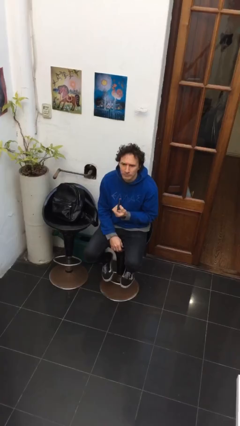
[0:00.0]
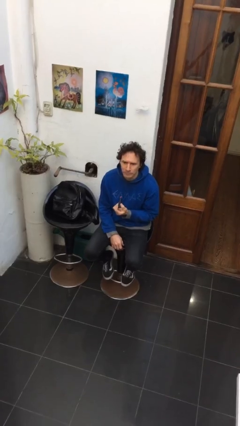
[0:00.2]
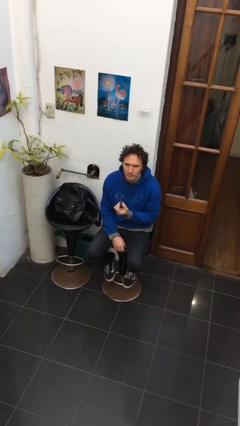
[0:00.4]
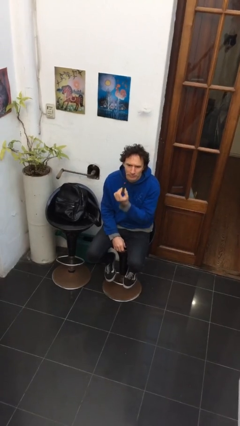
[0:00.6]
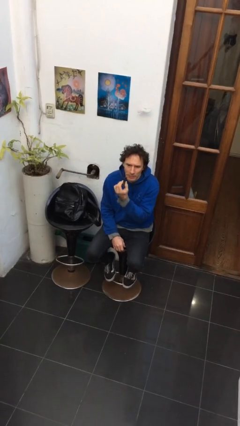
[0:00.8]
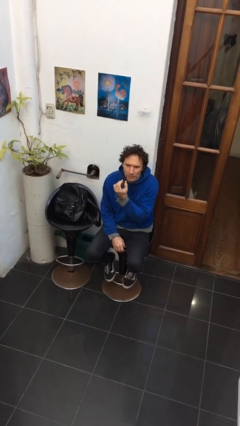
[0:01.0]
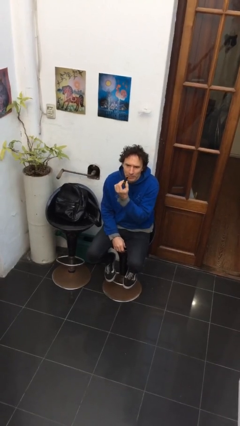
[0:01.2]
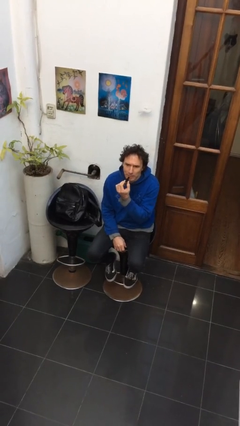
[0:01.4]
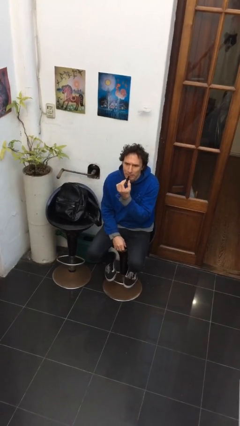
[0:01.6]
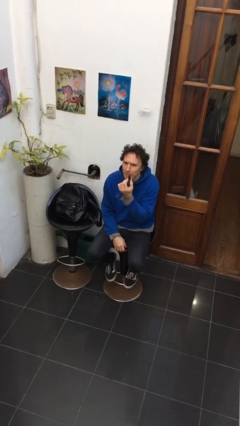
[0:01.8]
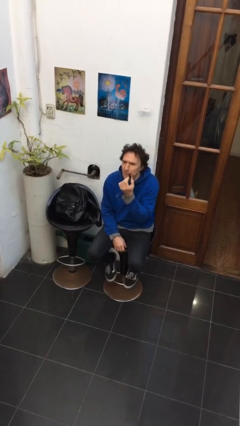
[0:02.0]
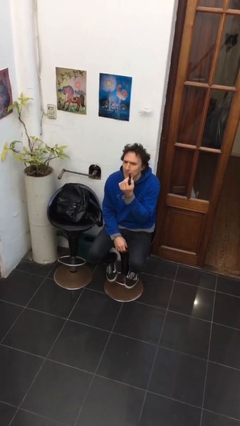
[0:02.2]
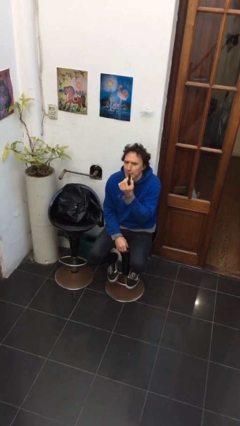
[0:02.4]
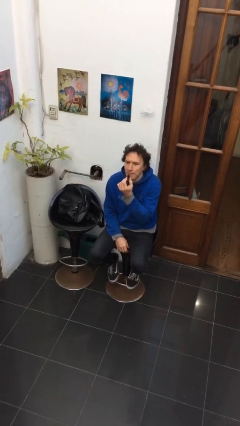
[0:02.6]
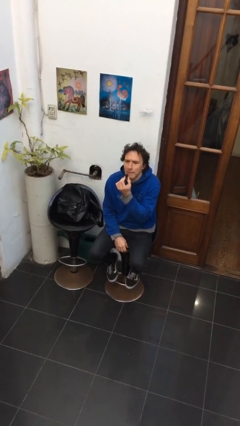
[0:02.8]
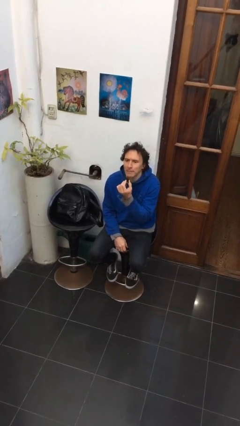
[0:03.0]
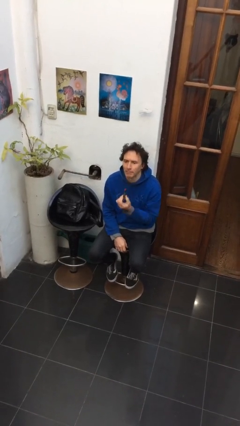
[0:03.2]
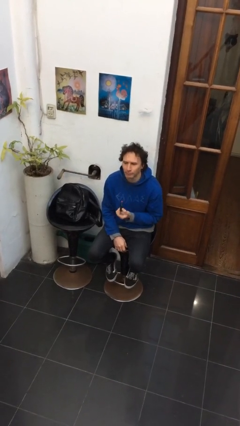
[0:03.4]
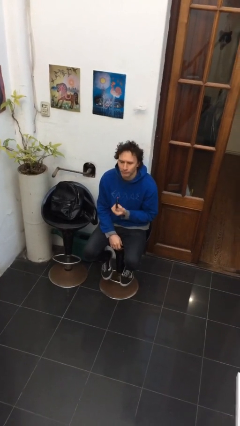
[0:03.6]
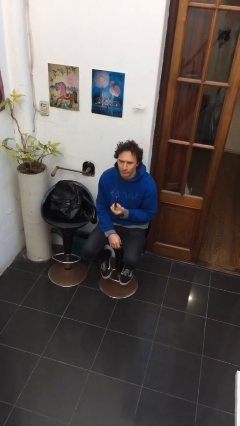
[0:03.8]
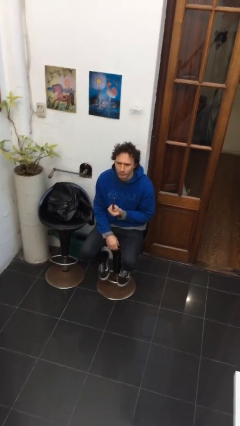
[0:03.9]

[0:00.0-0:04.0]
person applies lip makeup

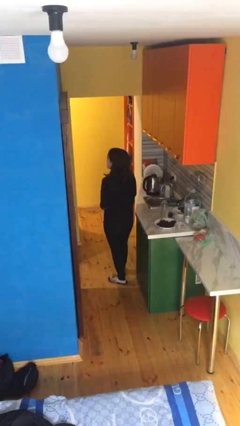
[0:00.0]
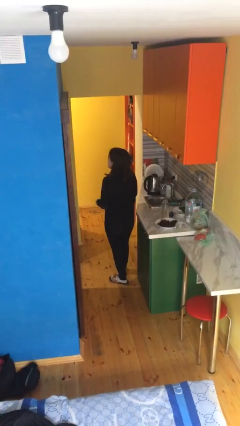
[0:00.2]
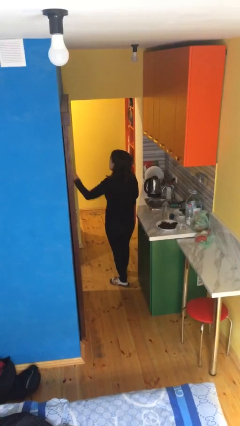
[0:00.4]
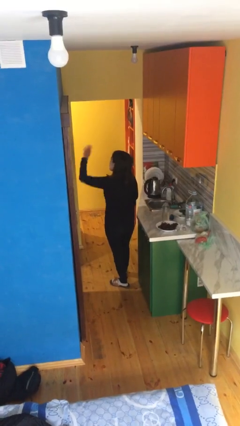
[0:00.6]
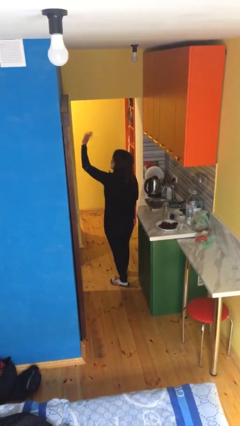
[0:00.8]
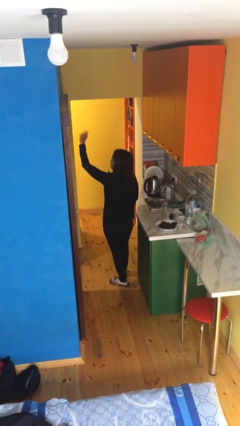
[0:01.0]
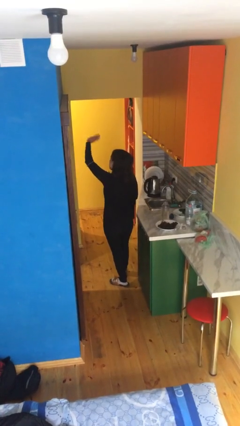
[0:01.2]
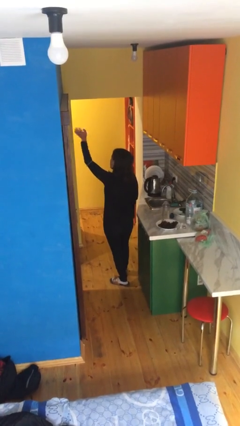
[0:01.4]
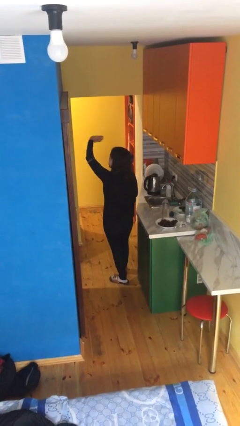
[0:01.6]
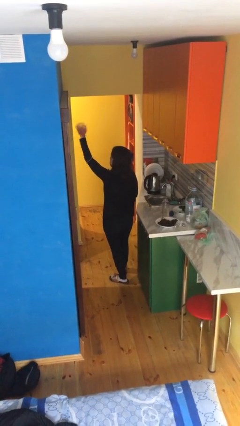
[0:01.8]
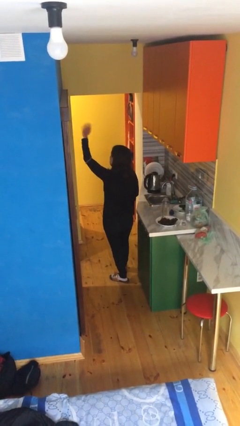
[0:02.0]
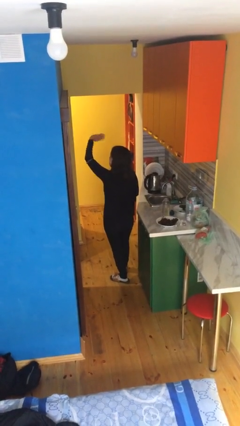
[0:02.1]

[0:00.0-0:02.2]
person waves at person

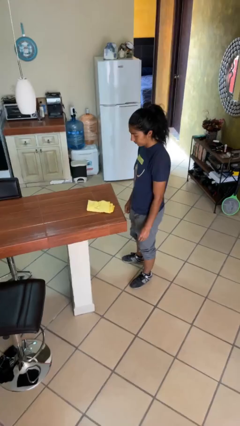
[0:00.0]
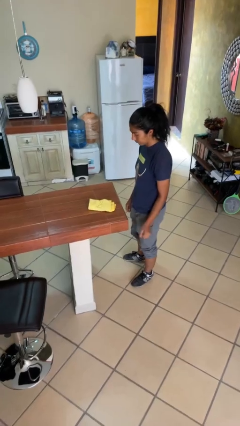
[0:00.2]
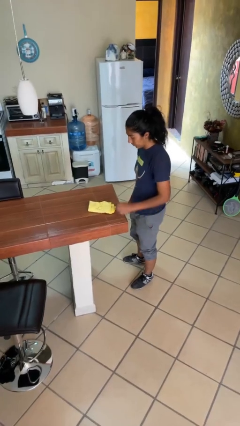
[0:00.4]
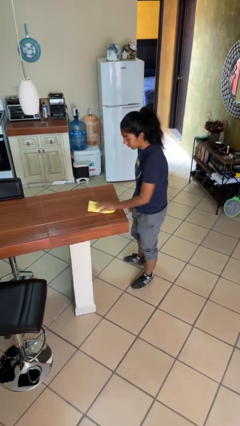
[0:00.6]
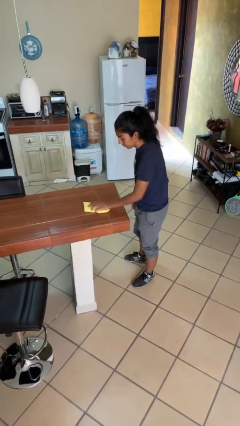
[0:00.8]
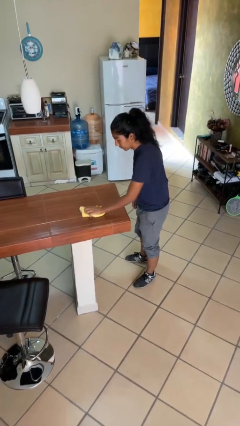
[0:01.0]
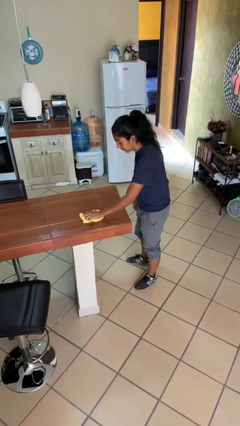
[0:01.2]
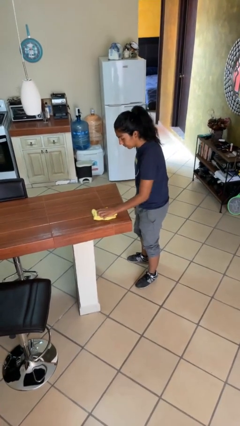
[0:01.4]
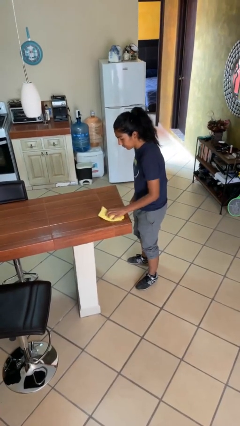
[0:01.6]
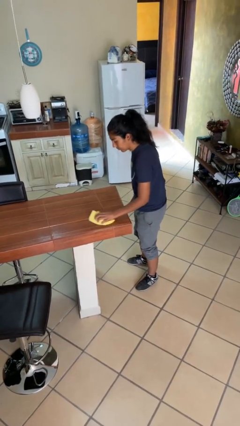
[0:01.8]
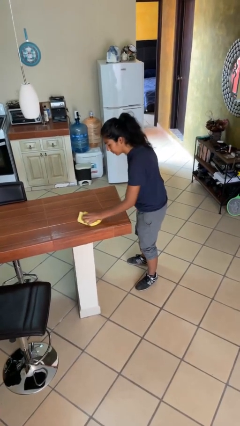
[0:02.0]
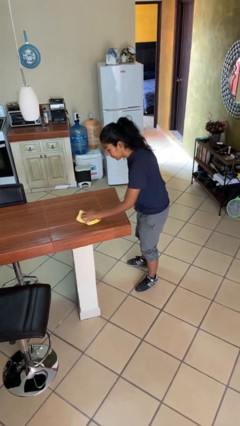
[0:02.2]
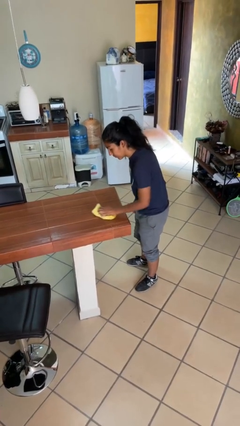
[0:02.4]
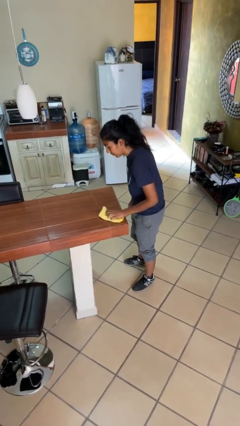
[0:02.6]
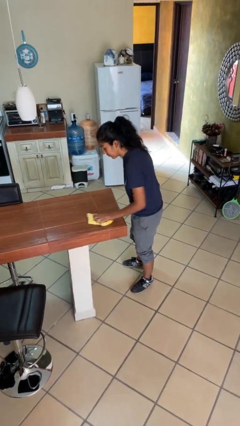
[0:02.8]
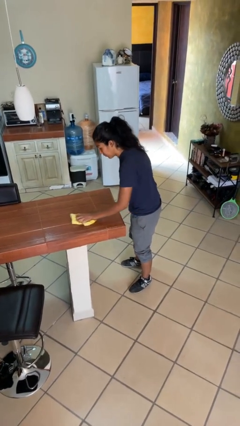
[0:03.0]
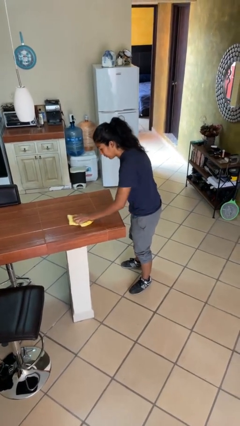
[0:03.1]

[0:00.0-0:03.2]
person cleans table with rag

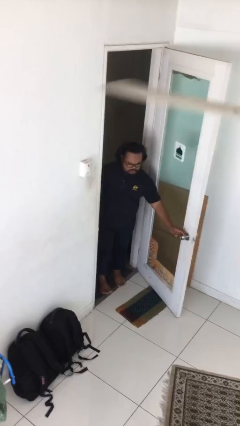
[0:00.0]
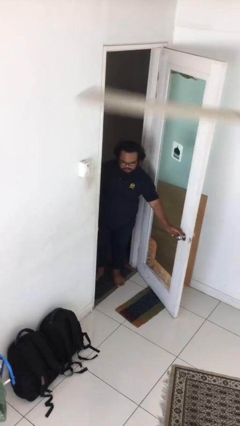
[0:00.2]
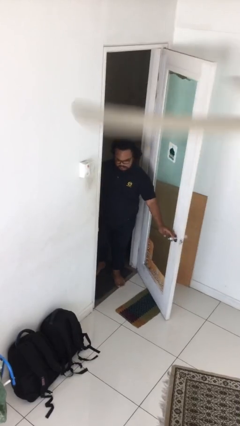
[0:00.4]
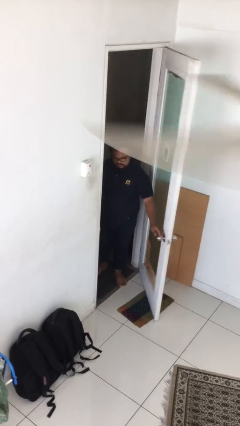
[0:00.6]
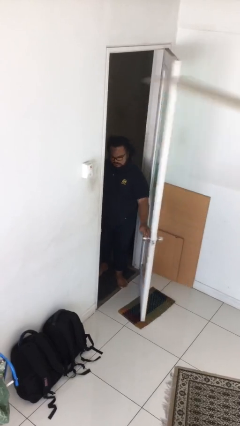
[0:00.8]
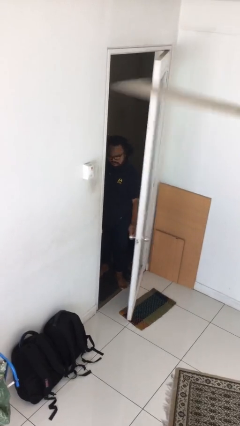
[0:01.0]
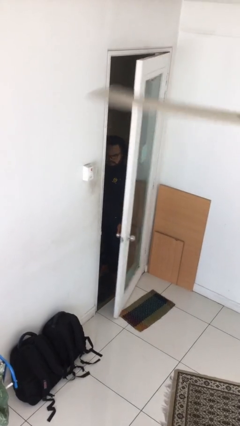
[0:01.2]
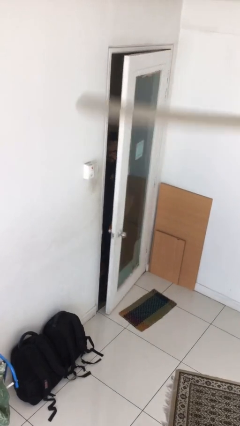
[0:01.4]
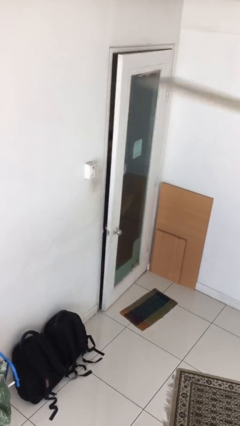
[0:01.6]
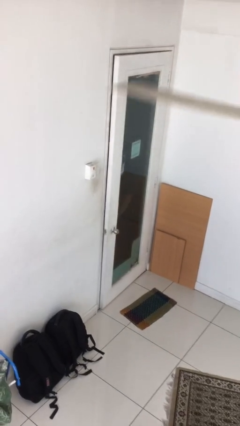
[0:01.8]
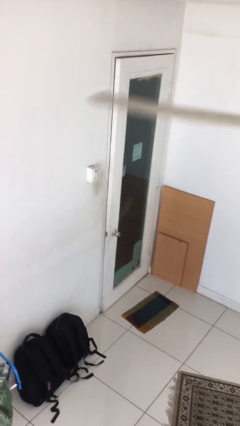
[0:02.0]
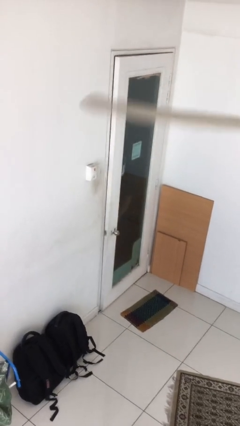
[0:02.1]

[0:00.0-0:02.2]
person closes facility door

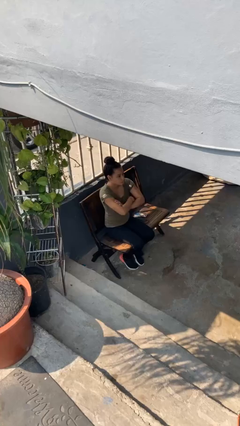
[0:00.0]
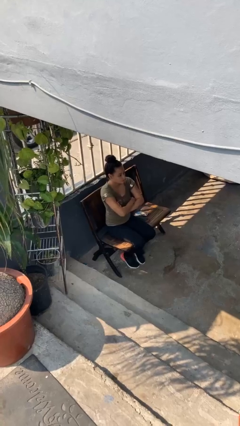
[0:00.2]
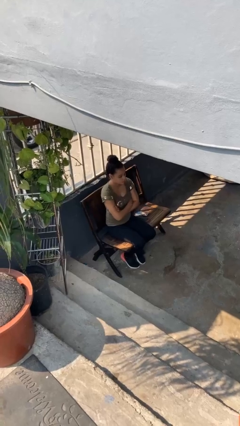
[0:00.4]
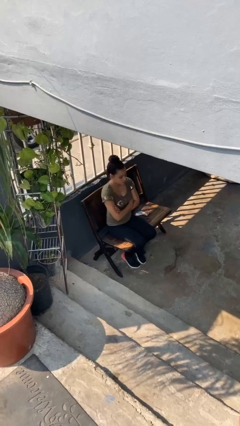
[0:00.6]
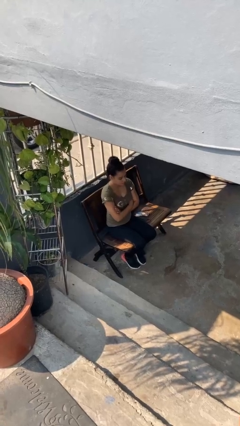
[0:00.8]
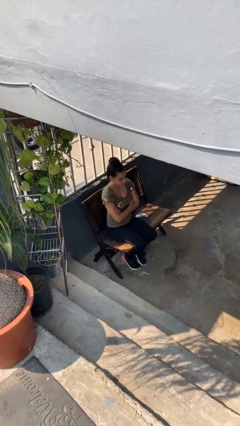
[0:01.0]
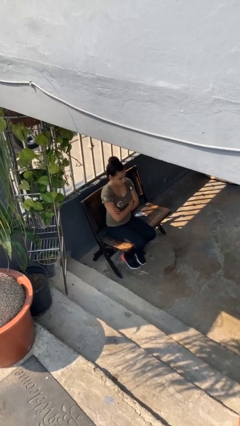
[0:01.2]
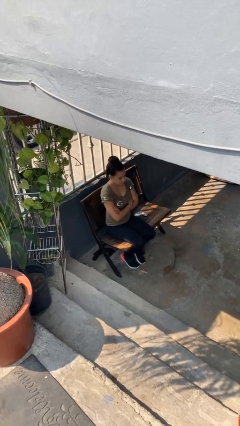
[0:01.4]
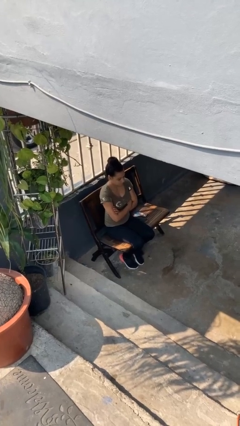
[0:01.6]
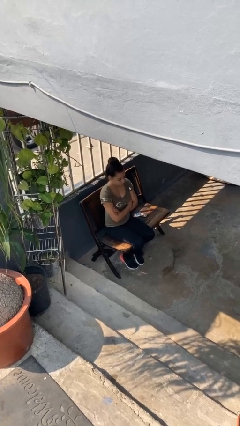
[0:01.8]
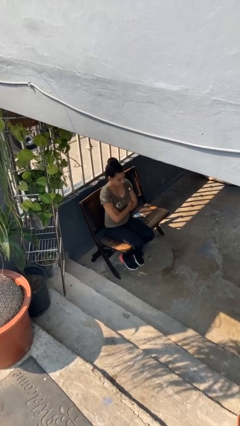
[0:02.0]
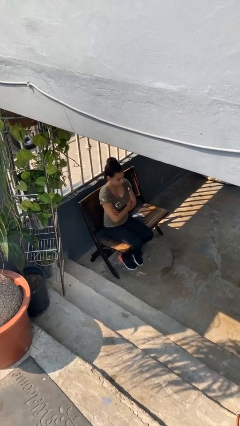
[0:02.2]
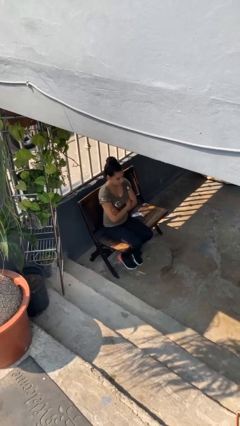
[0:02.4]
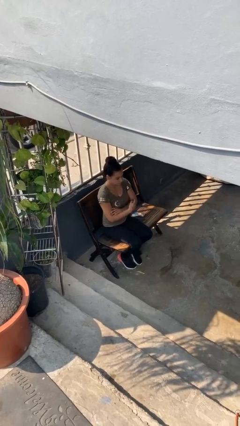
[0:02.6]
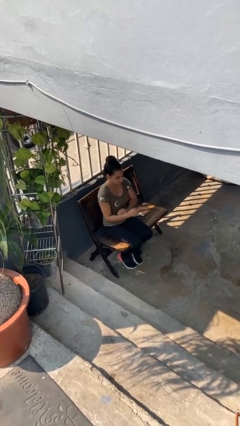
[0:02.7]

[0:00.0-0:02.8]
person crosses arms

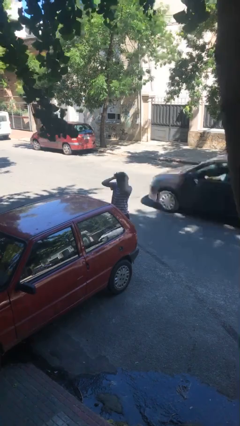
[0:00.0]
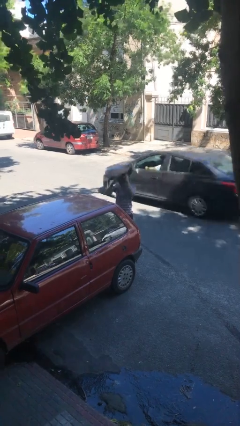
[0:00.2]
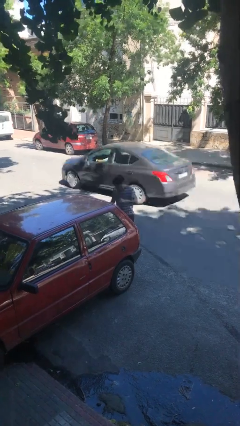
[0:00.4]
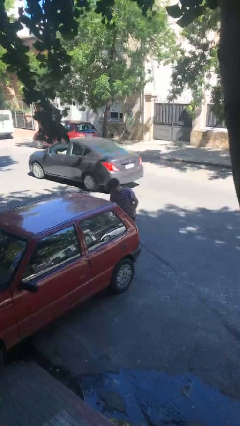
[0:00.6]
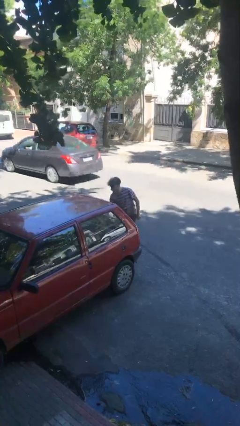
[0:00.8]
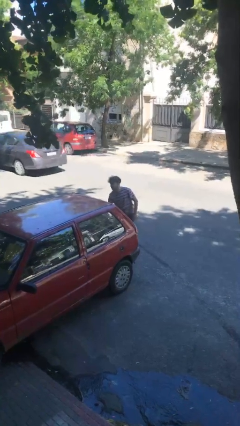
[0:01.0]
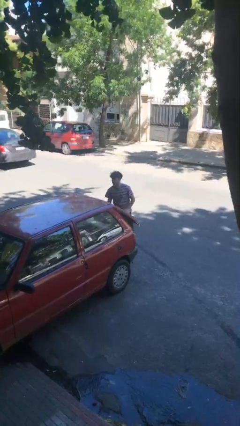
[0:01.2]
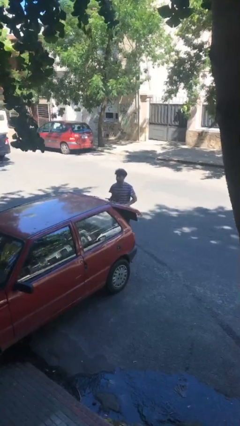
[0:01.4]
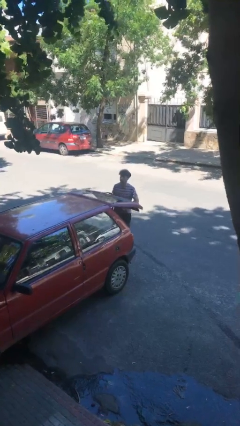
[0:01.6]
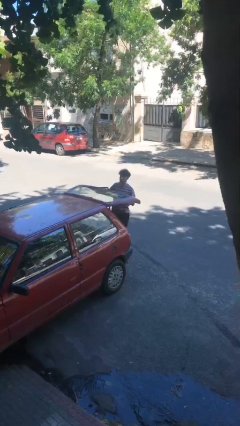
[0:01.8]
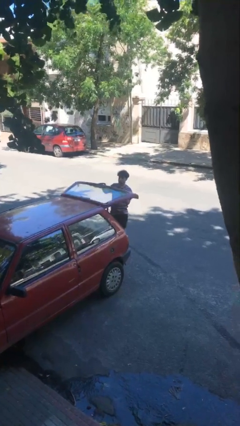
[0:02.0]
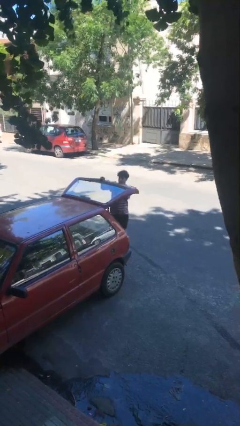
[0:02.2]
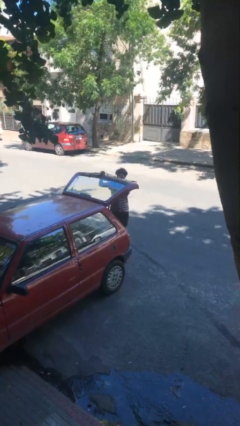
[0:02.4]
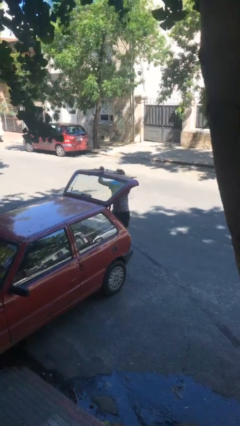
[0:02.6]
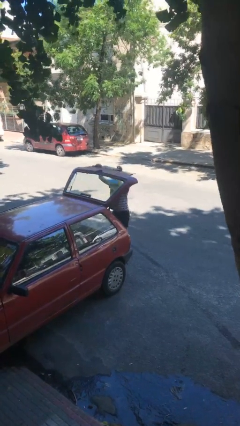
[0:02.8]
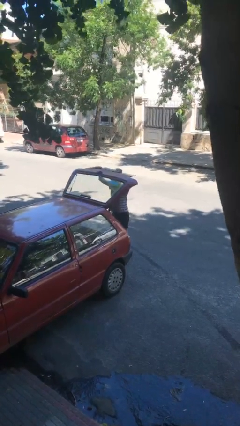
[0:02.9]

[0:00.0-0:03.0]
person opens car trunk

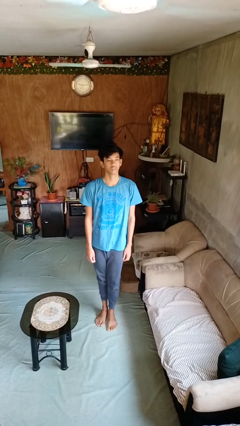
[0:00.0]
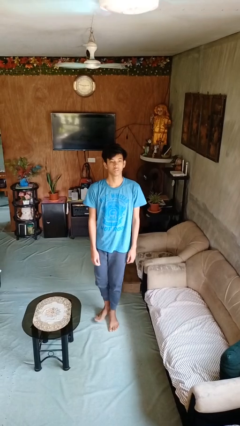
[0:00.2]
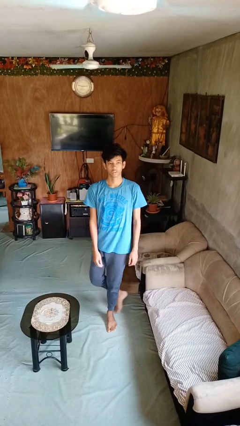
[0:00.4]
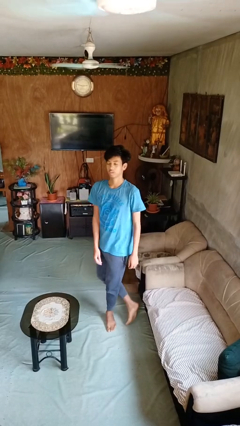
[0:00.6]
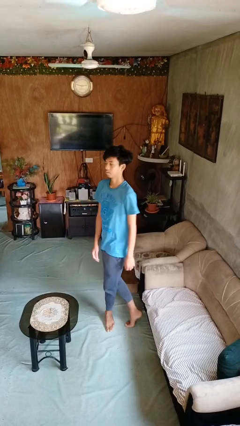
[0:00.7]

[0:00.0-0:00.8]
person twirls
